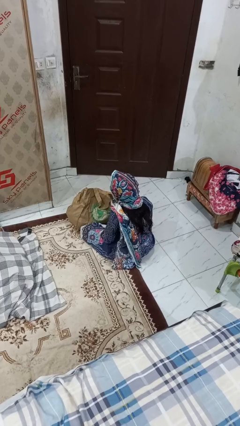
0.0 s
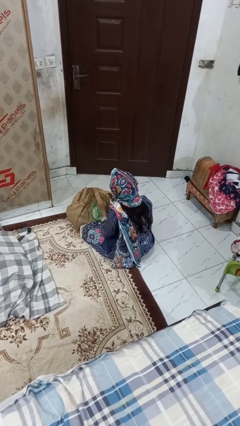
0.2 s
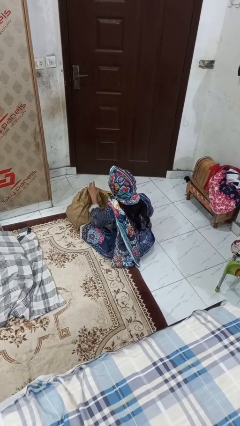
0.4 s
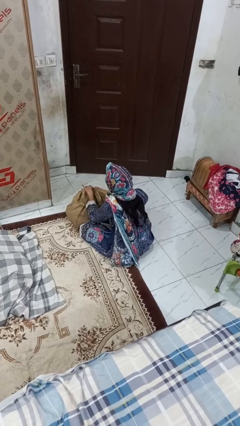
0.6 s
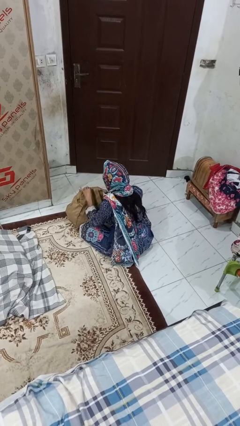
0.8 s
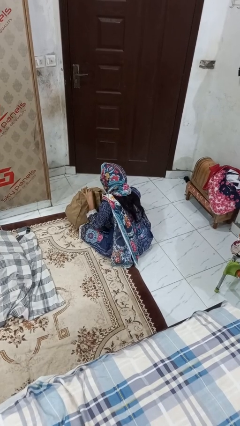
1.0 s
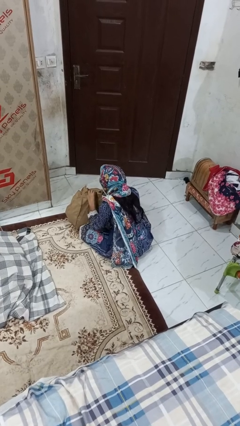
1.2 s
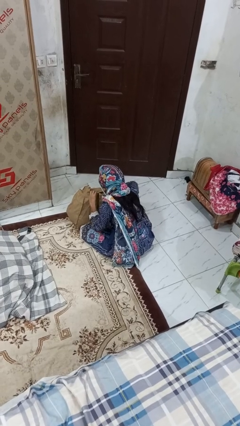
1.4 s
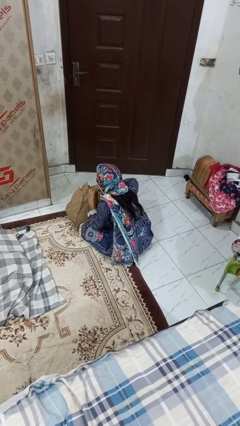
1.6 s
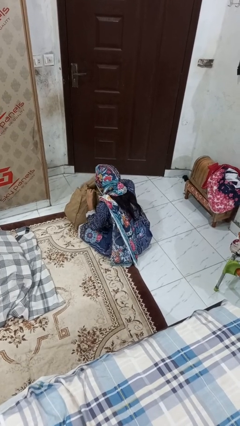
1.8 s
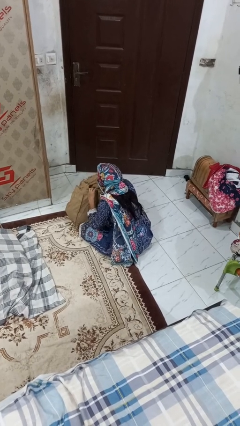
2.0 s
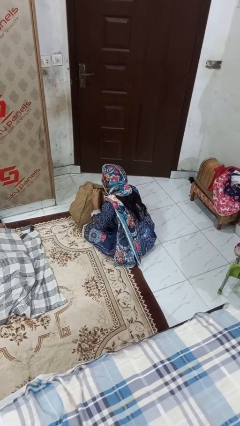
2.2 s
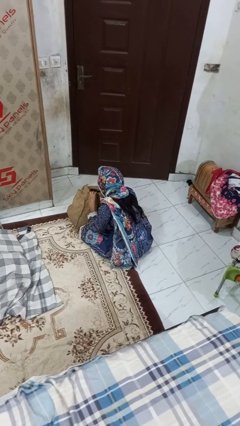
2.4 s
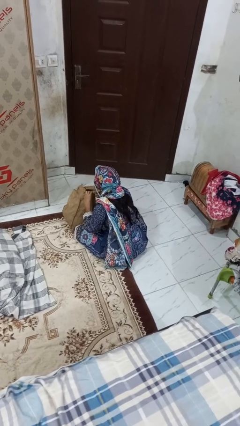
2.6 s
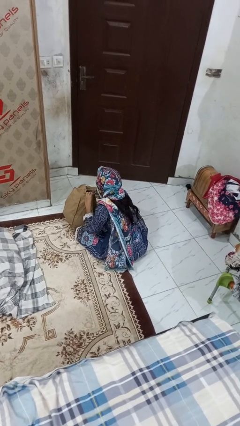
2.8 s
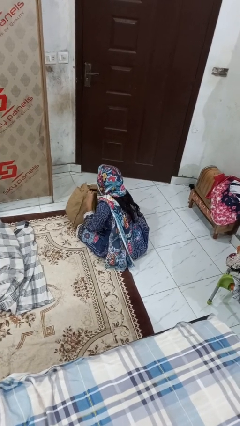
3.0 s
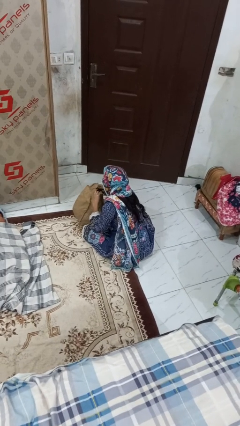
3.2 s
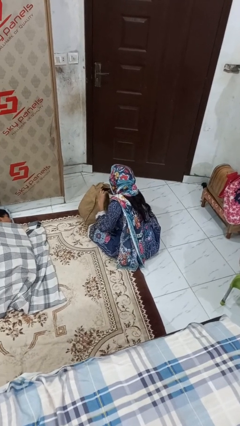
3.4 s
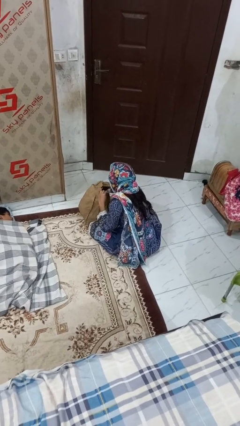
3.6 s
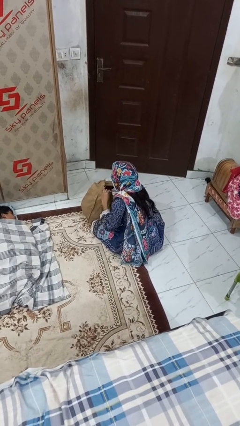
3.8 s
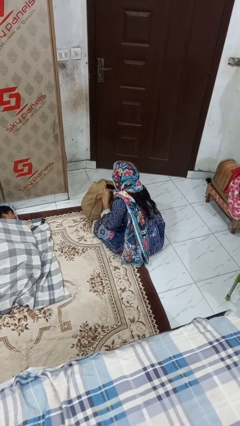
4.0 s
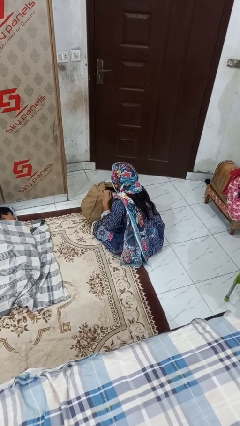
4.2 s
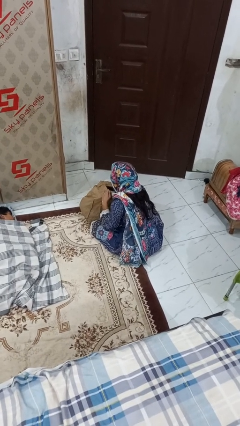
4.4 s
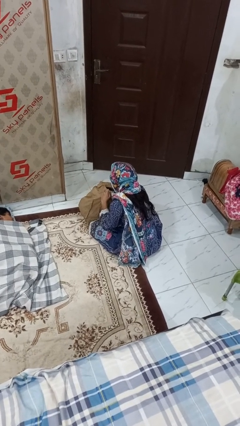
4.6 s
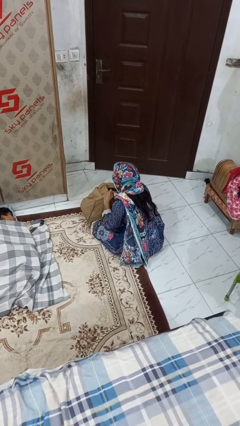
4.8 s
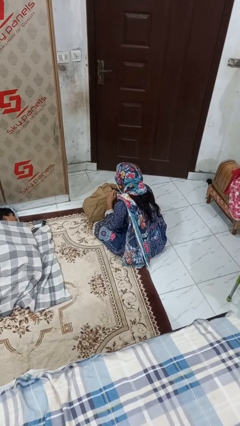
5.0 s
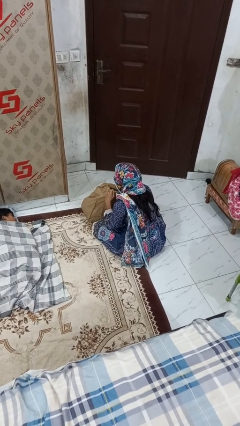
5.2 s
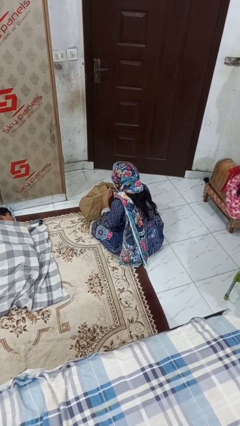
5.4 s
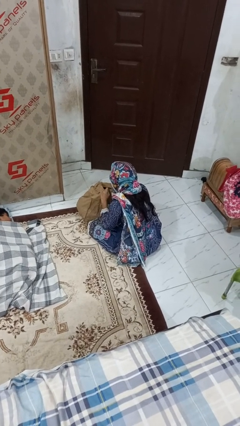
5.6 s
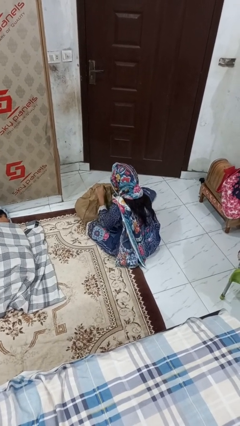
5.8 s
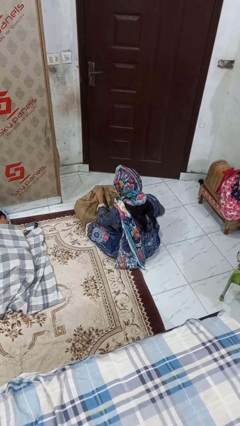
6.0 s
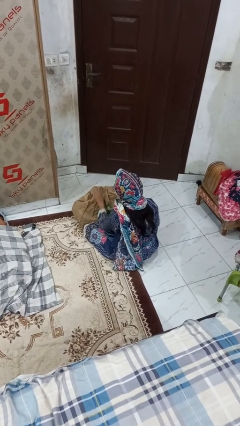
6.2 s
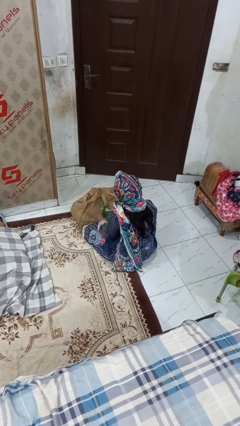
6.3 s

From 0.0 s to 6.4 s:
person searches in bag

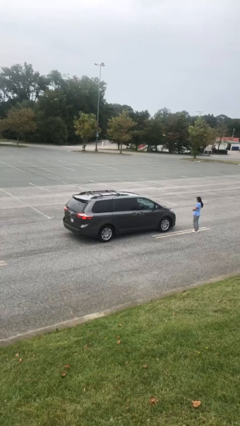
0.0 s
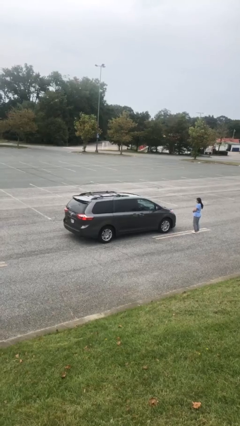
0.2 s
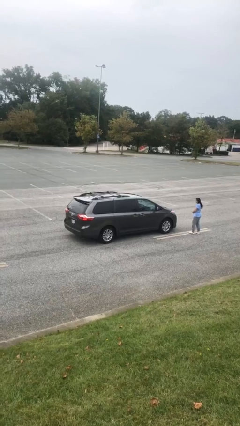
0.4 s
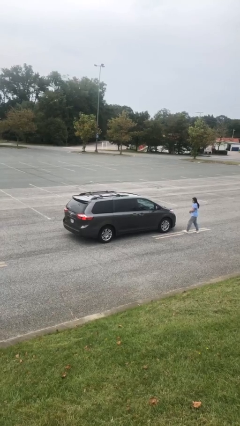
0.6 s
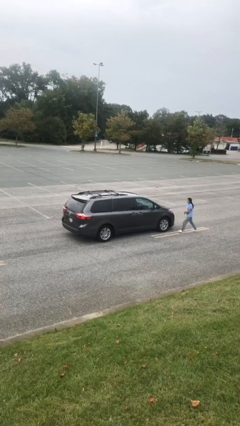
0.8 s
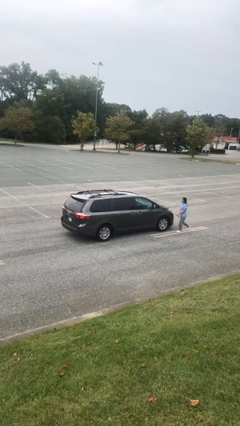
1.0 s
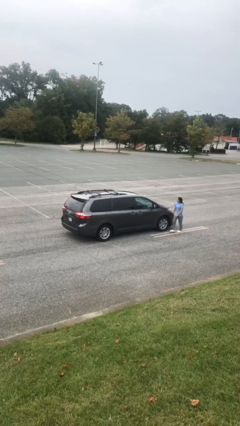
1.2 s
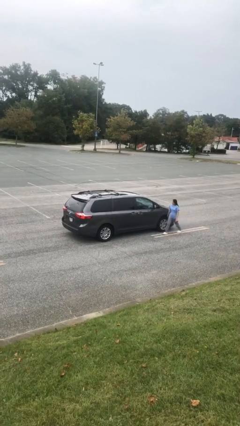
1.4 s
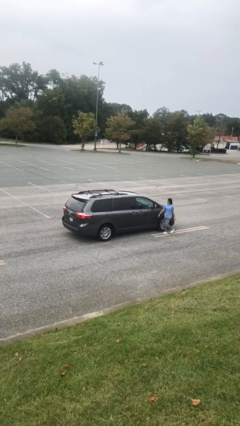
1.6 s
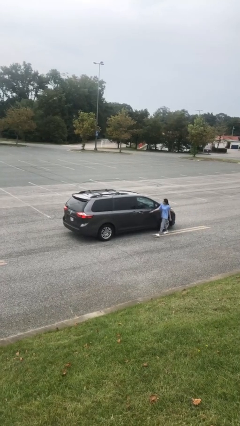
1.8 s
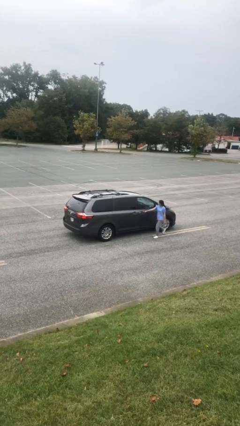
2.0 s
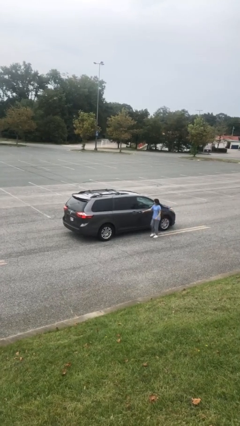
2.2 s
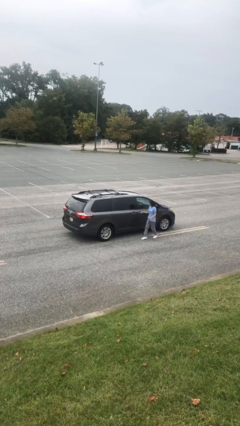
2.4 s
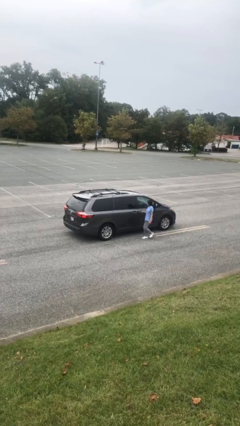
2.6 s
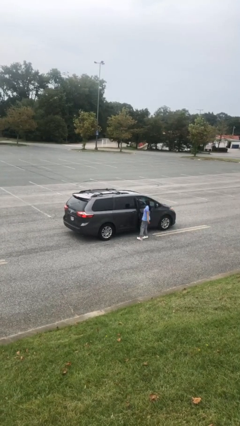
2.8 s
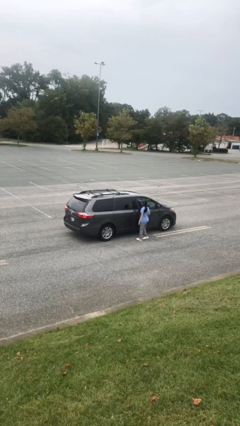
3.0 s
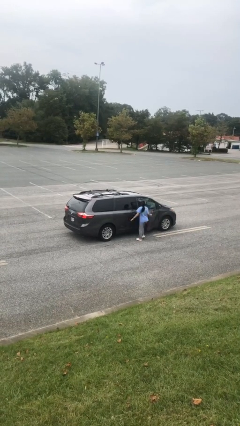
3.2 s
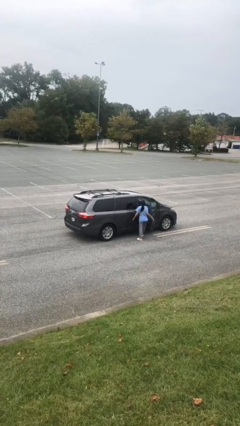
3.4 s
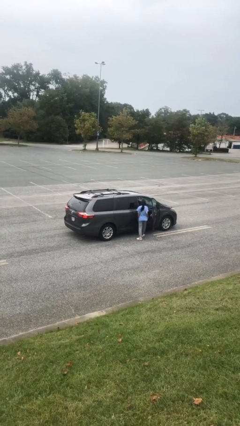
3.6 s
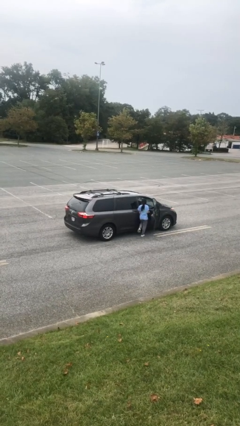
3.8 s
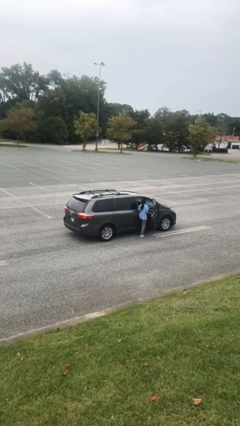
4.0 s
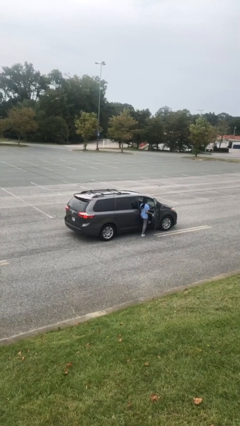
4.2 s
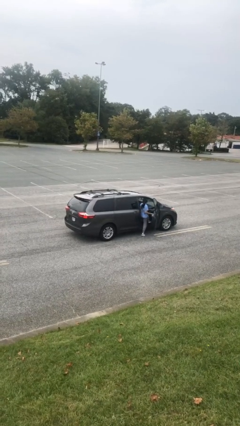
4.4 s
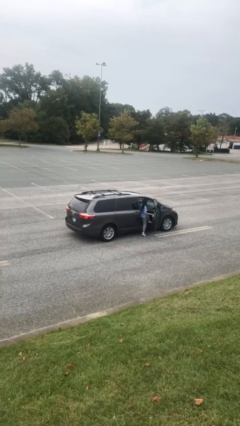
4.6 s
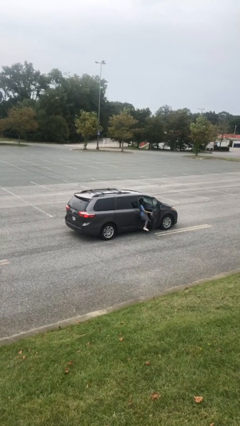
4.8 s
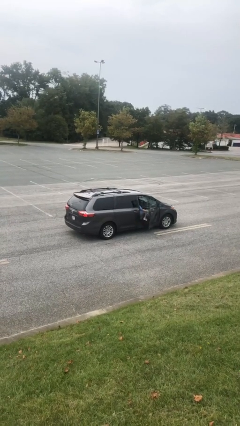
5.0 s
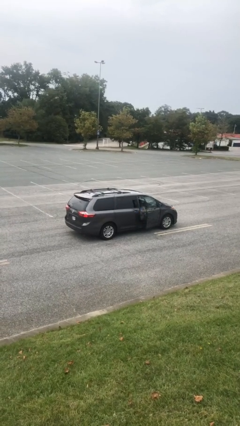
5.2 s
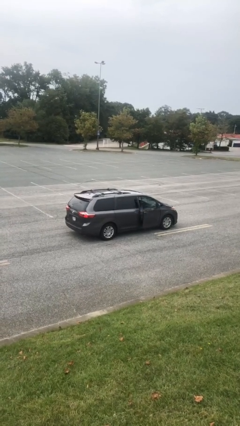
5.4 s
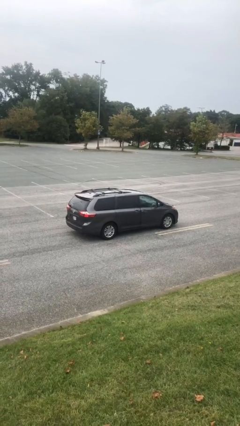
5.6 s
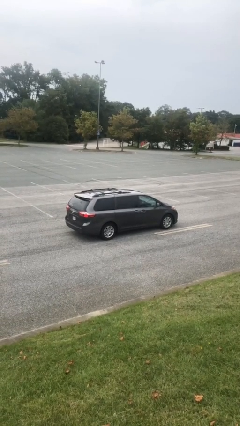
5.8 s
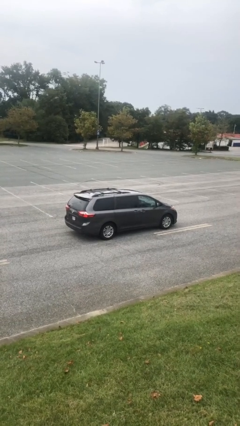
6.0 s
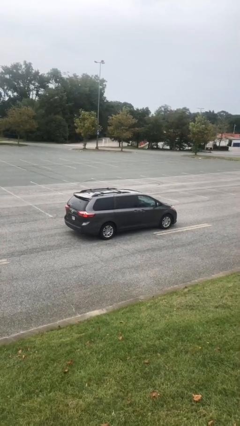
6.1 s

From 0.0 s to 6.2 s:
car picks up person

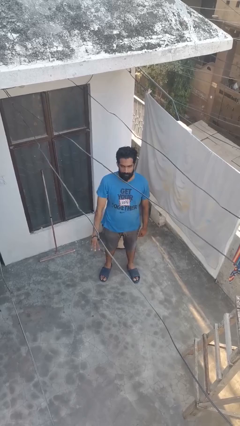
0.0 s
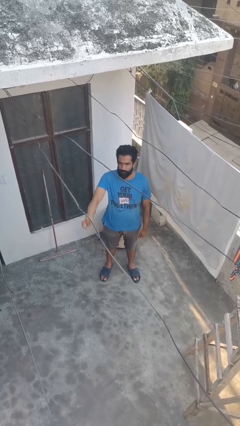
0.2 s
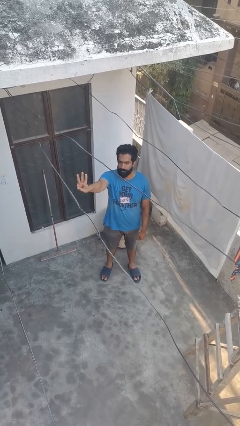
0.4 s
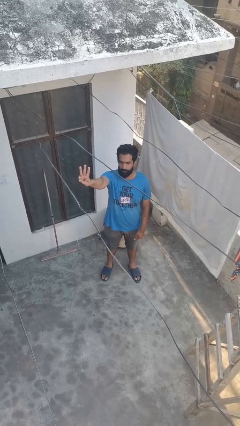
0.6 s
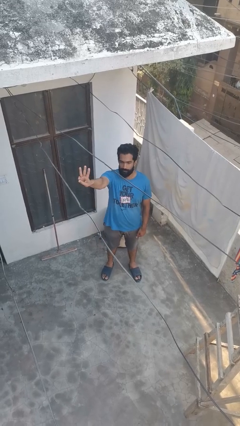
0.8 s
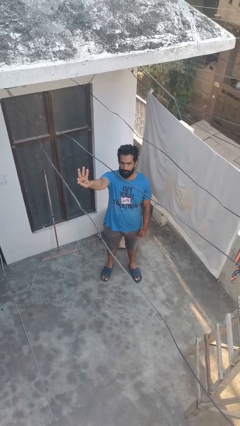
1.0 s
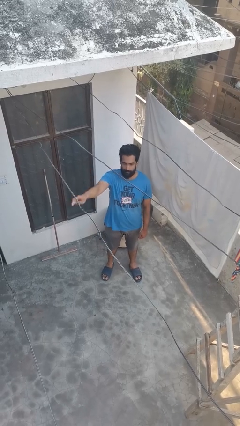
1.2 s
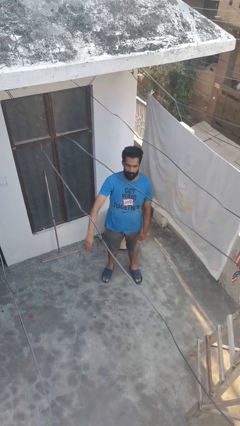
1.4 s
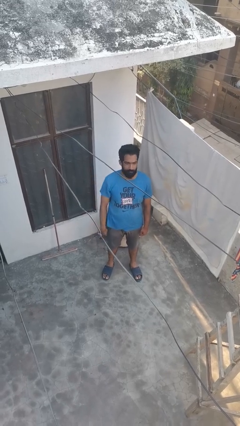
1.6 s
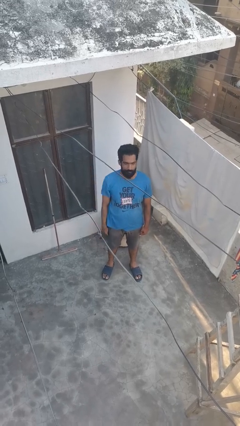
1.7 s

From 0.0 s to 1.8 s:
person gestures number three

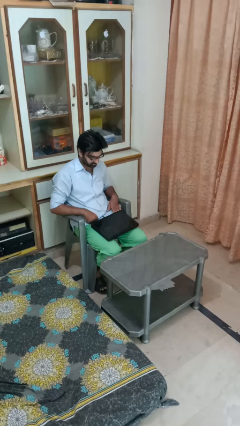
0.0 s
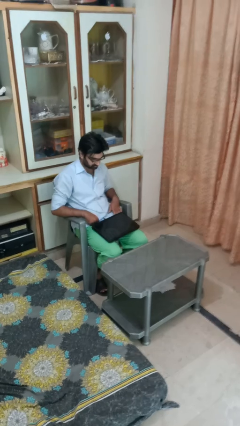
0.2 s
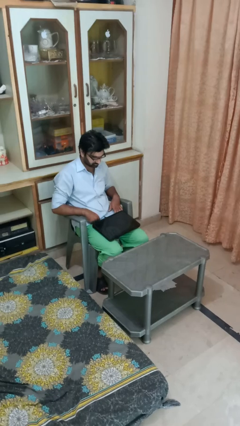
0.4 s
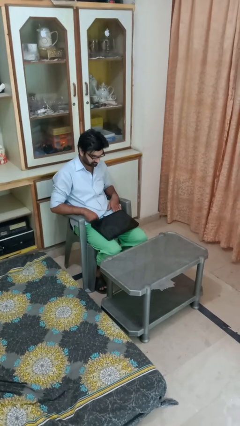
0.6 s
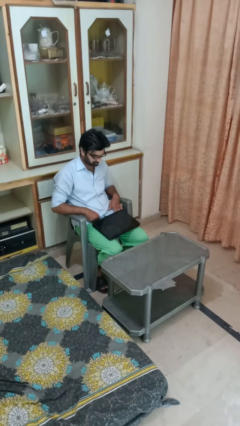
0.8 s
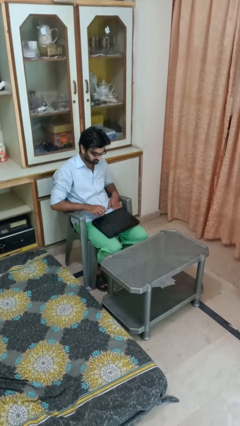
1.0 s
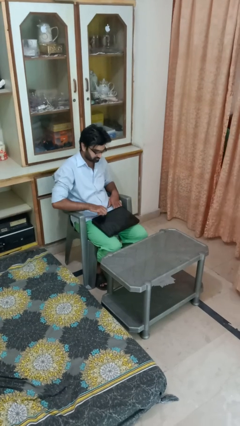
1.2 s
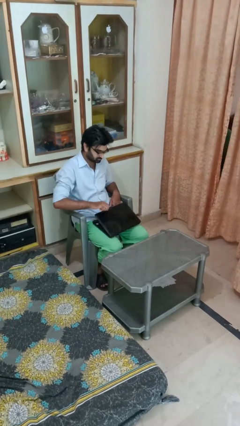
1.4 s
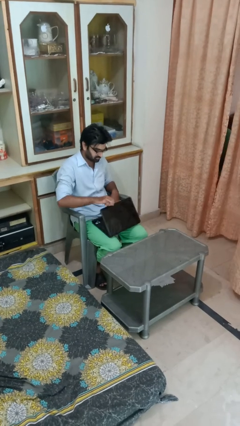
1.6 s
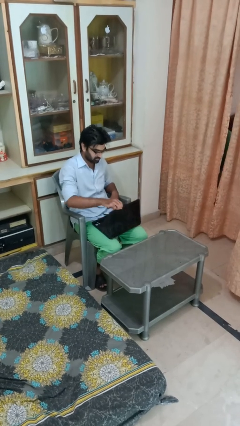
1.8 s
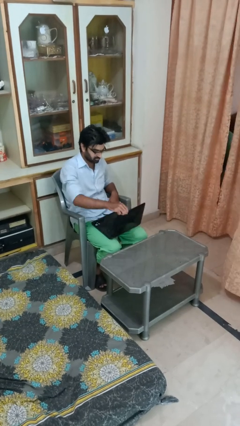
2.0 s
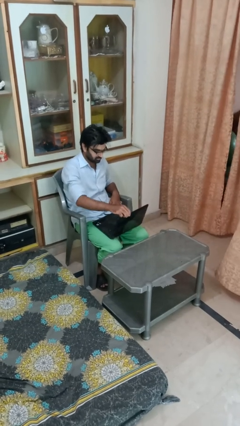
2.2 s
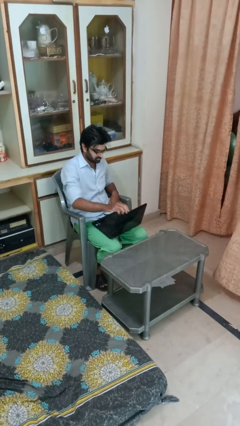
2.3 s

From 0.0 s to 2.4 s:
person opens laptop

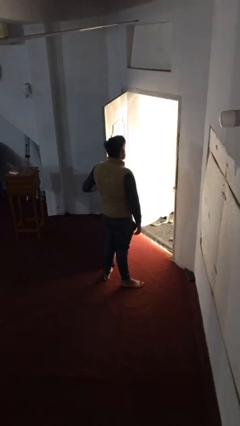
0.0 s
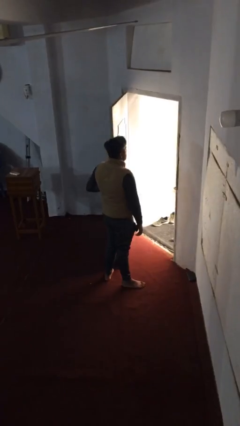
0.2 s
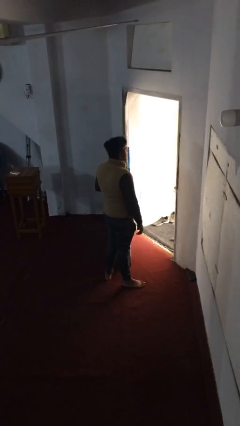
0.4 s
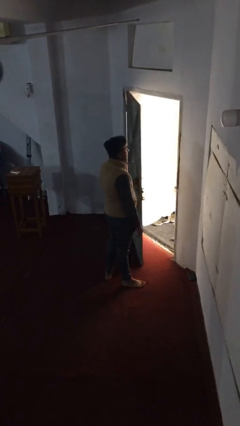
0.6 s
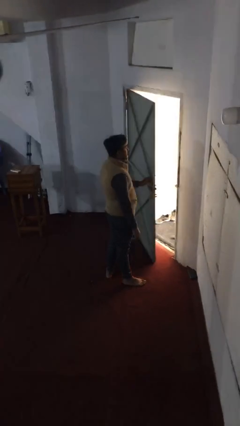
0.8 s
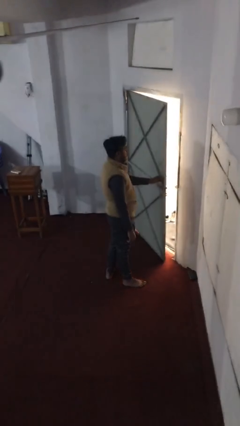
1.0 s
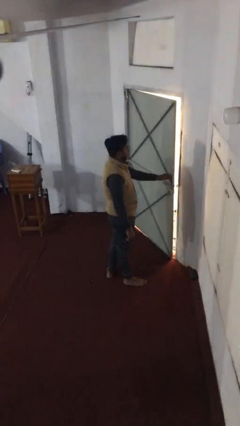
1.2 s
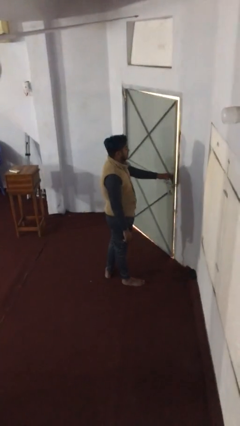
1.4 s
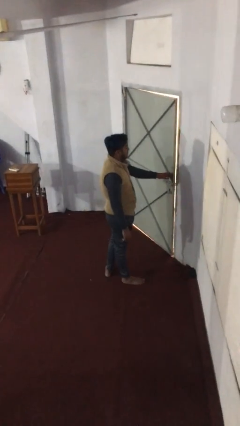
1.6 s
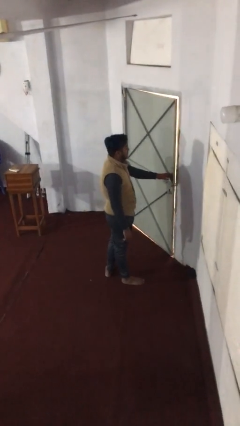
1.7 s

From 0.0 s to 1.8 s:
person closes facility door
